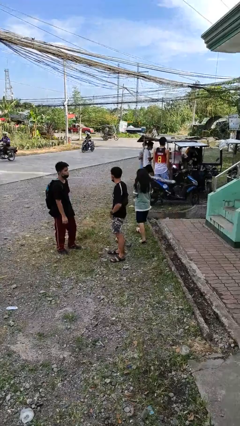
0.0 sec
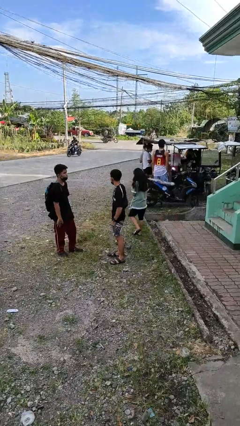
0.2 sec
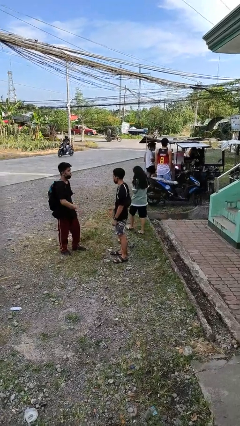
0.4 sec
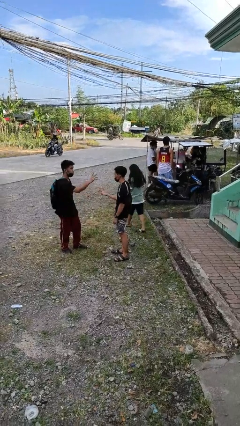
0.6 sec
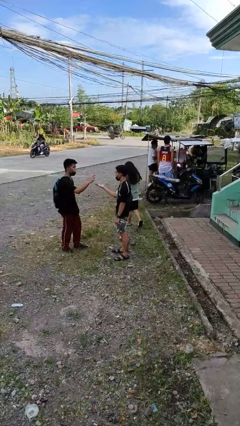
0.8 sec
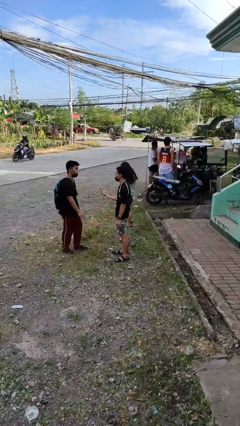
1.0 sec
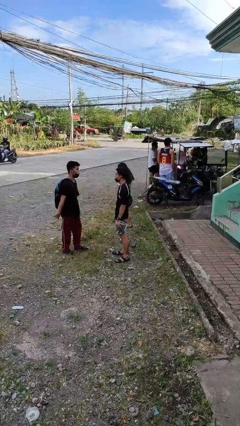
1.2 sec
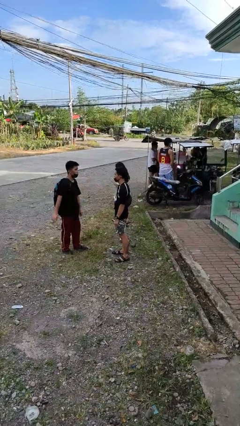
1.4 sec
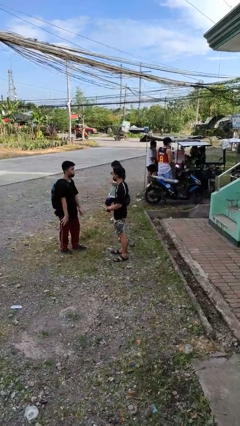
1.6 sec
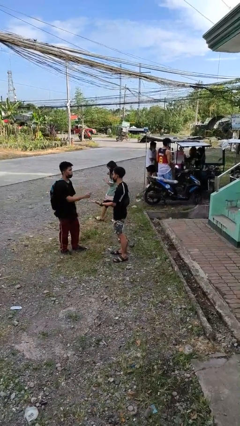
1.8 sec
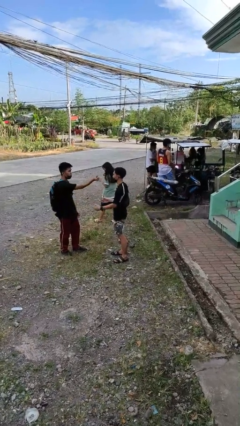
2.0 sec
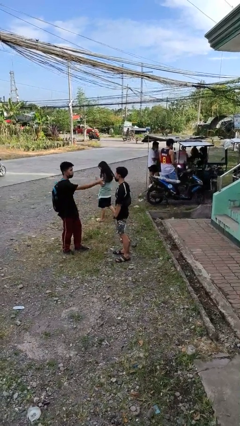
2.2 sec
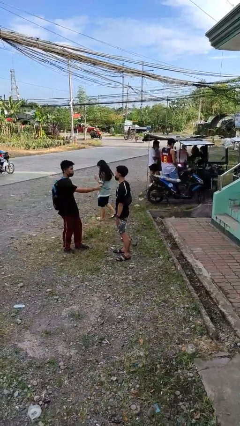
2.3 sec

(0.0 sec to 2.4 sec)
person talks to person

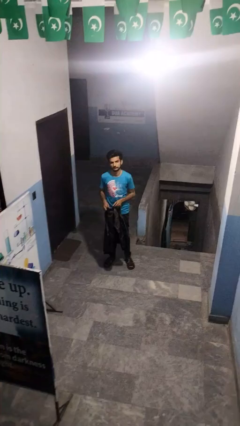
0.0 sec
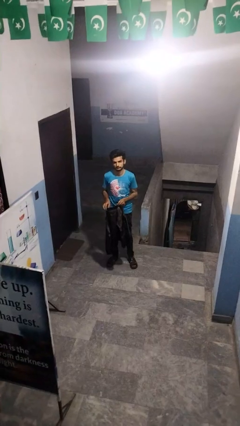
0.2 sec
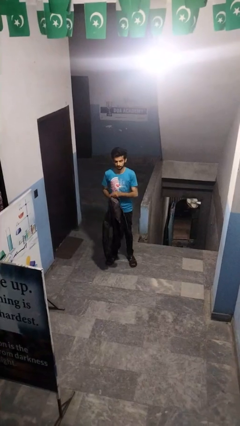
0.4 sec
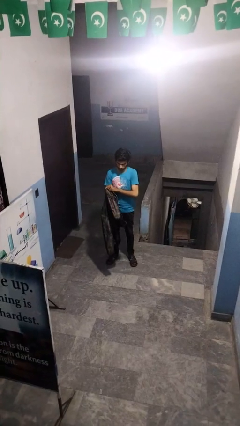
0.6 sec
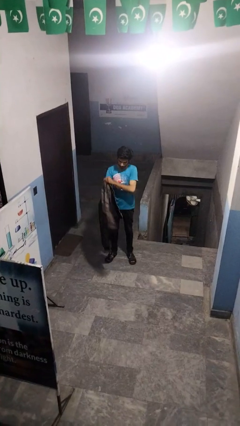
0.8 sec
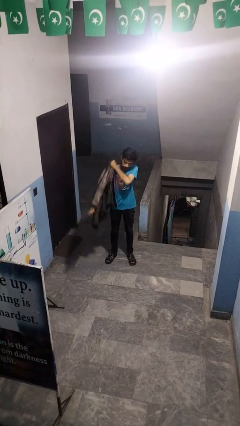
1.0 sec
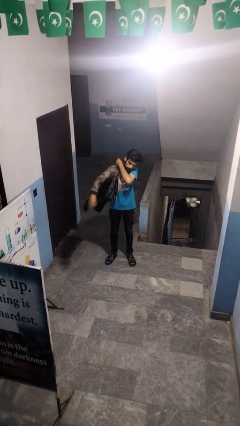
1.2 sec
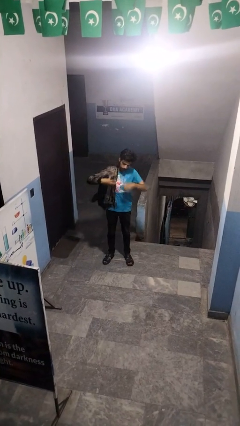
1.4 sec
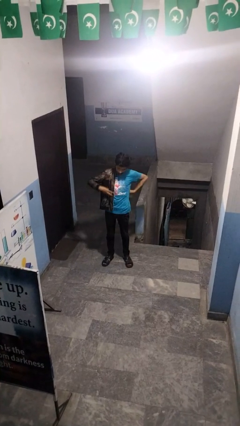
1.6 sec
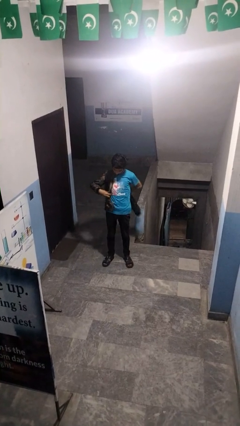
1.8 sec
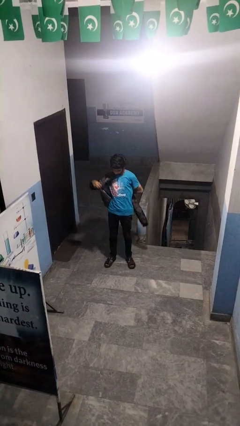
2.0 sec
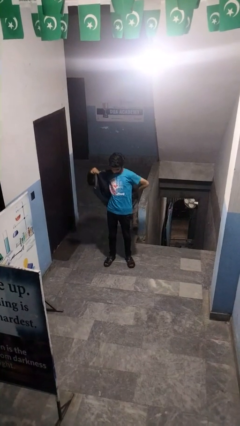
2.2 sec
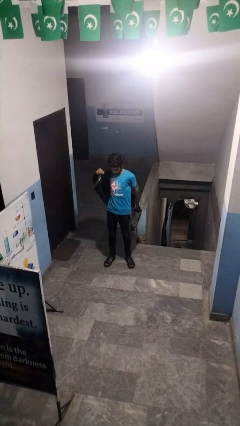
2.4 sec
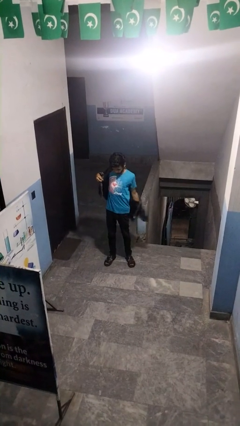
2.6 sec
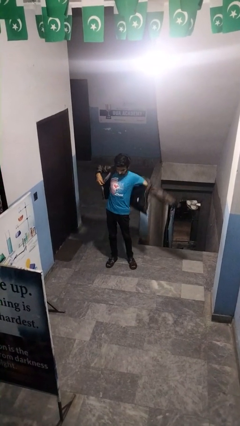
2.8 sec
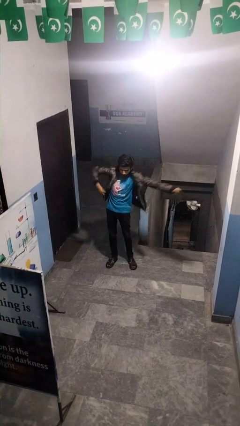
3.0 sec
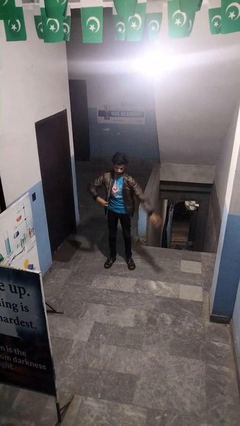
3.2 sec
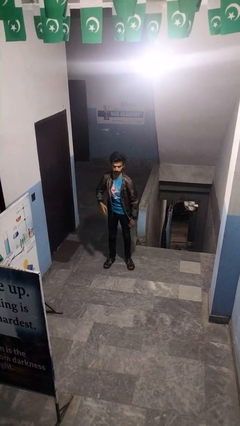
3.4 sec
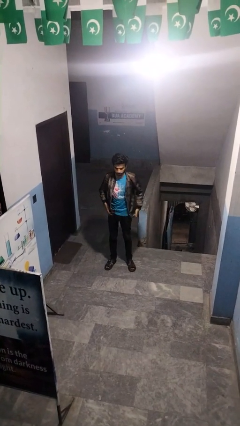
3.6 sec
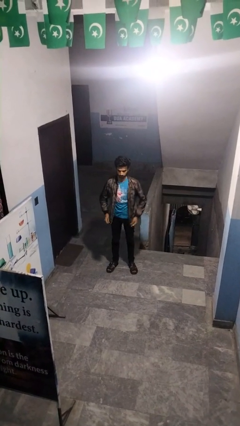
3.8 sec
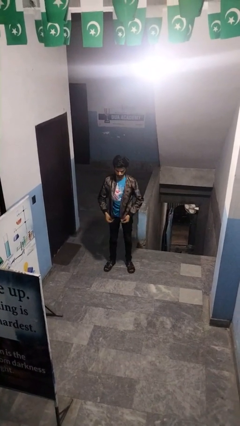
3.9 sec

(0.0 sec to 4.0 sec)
person puts on jacket

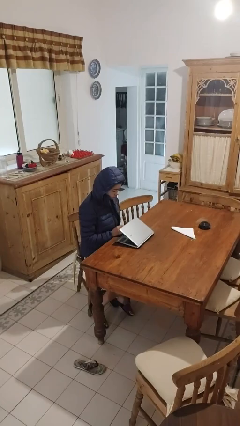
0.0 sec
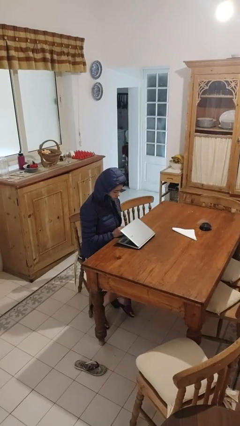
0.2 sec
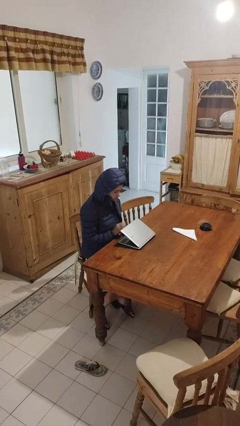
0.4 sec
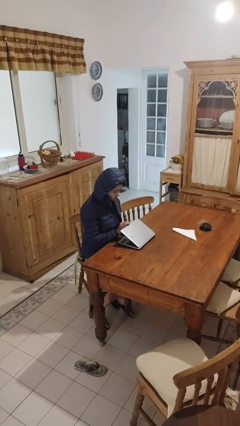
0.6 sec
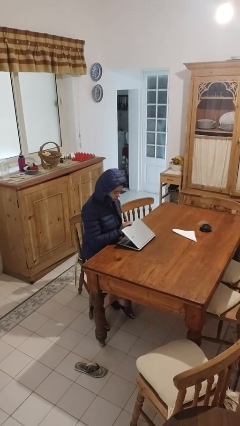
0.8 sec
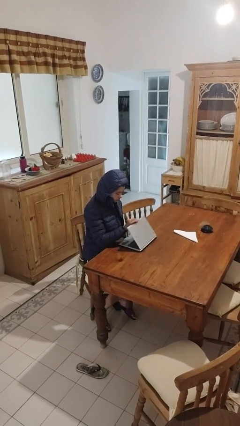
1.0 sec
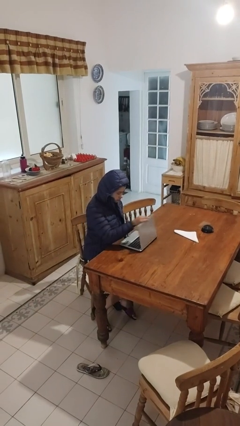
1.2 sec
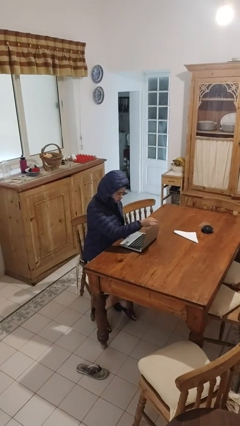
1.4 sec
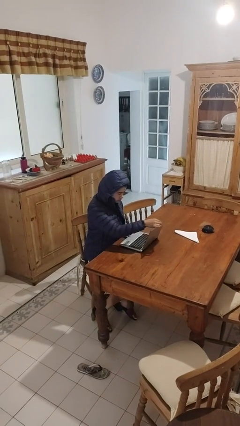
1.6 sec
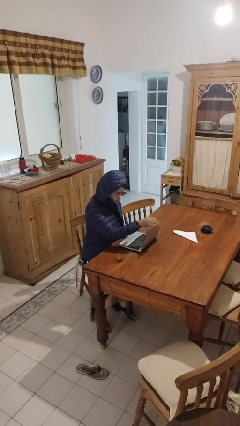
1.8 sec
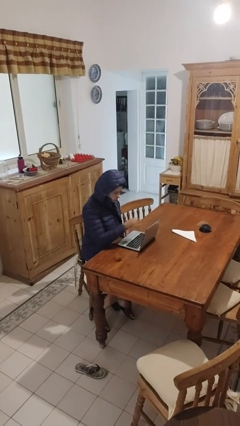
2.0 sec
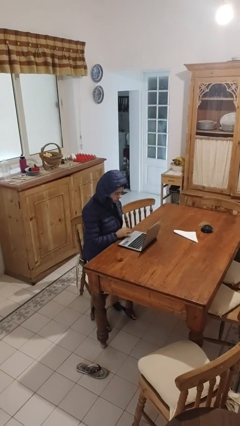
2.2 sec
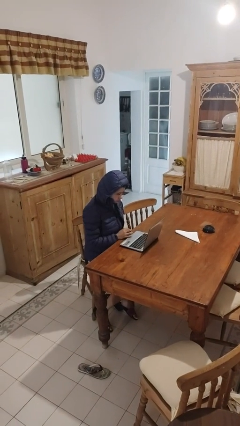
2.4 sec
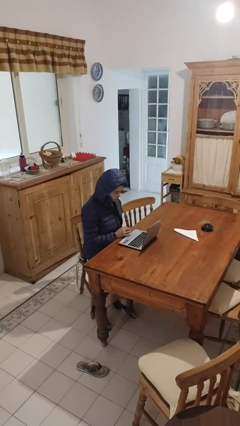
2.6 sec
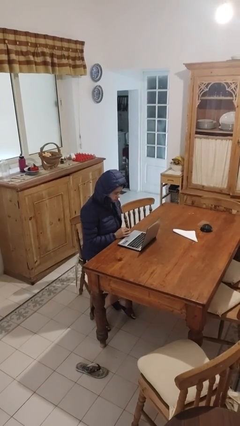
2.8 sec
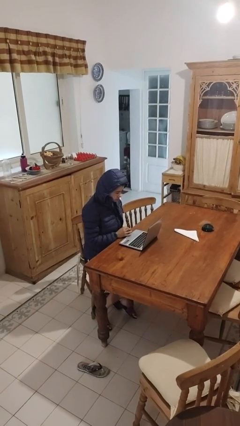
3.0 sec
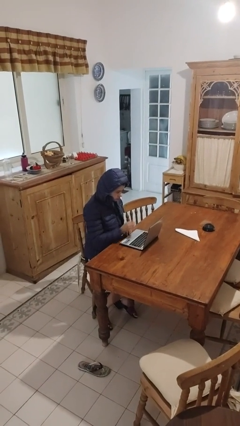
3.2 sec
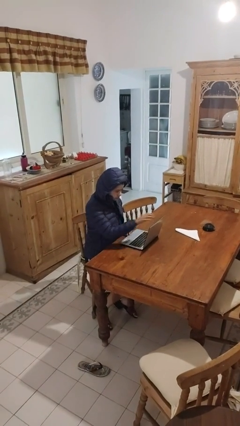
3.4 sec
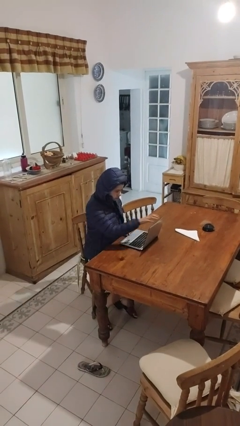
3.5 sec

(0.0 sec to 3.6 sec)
person opens laptop

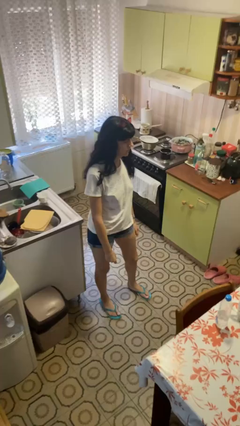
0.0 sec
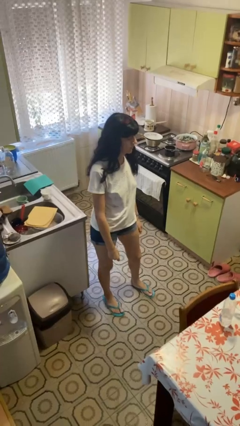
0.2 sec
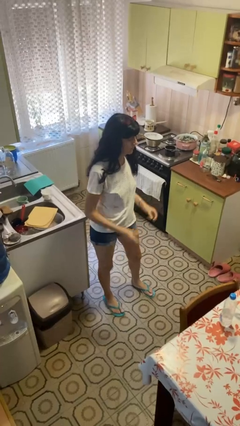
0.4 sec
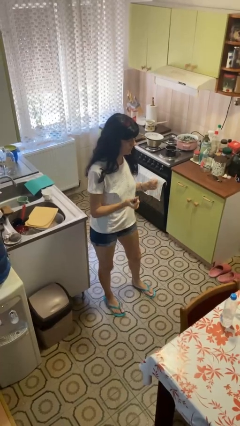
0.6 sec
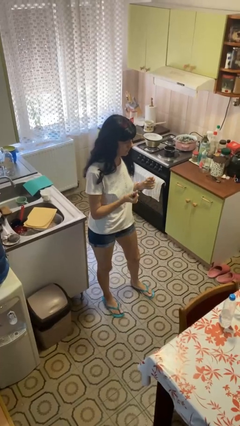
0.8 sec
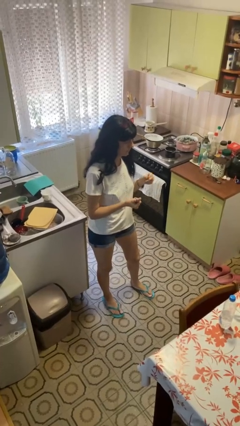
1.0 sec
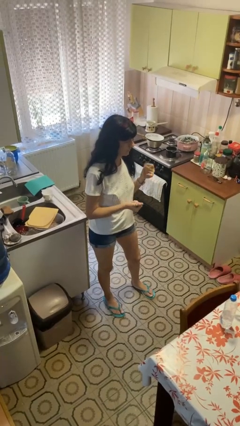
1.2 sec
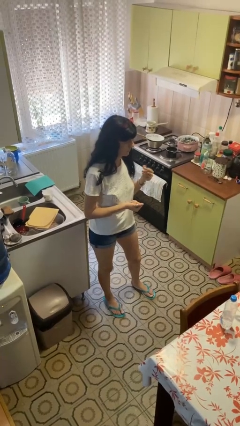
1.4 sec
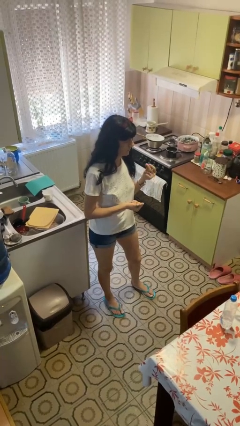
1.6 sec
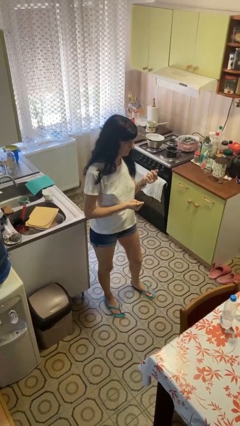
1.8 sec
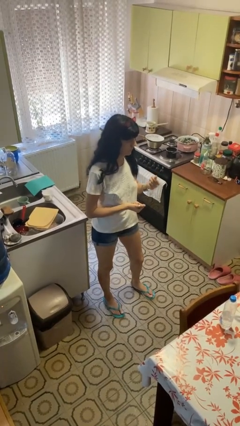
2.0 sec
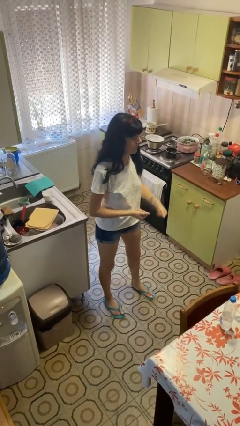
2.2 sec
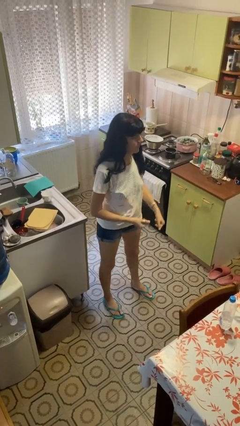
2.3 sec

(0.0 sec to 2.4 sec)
person snaps fingers

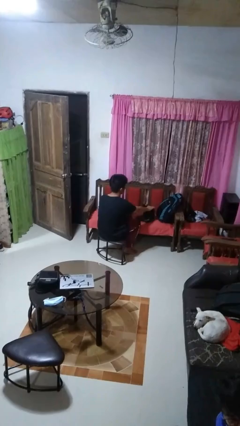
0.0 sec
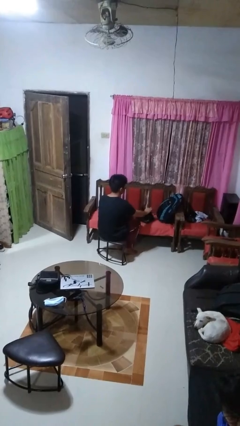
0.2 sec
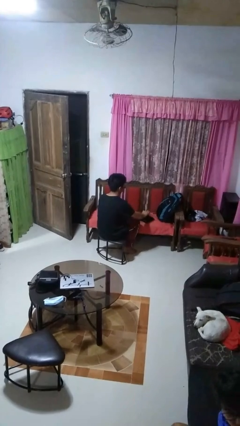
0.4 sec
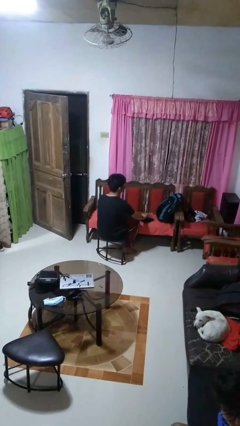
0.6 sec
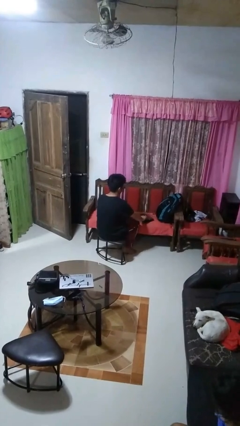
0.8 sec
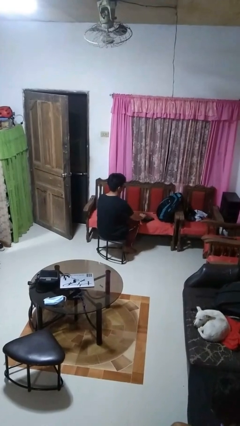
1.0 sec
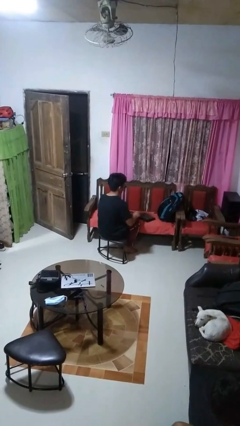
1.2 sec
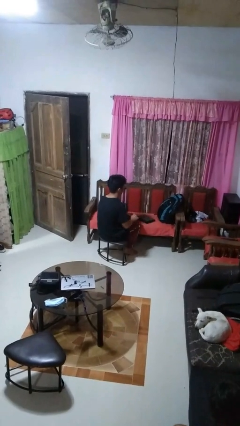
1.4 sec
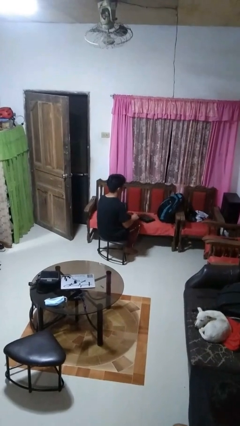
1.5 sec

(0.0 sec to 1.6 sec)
person closes laptop

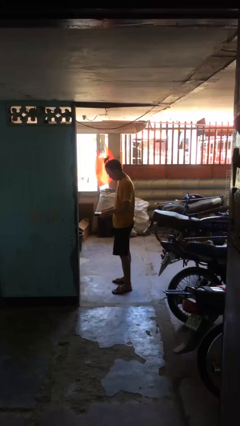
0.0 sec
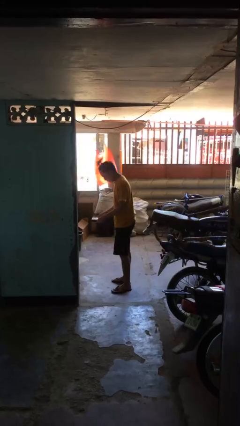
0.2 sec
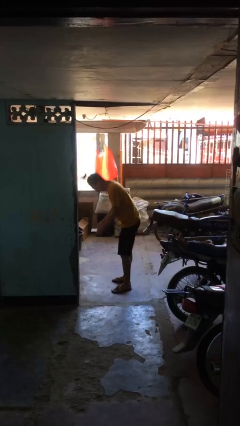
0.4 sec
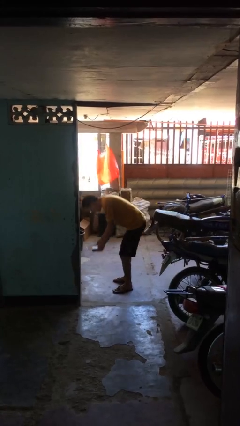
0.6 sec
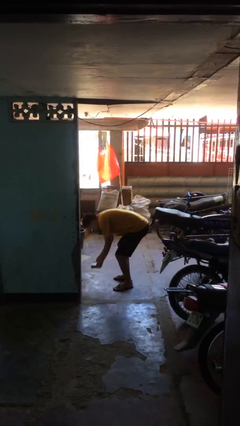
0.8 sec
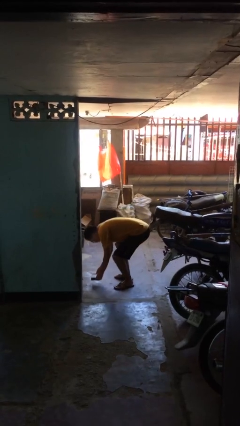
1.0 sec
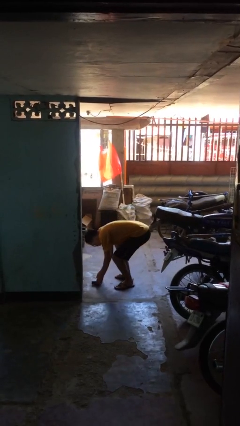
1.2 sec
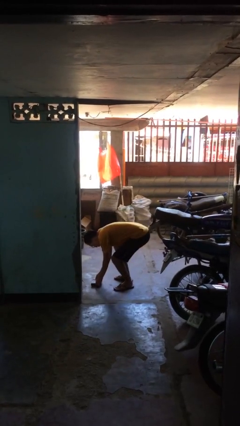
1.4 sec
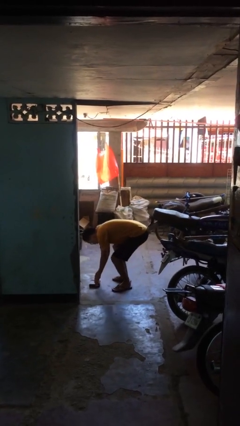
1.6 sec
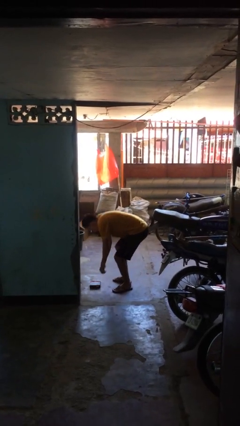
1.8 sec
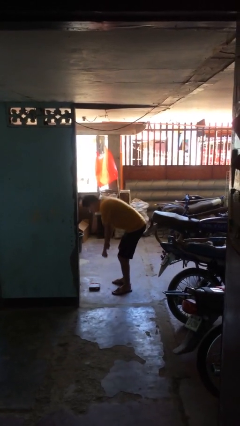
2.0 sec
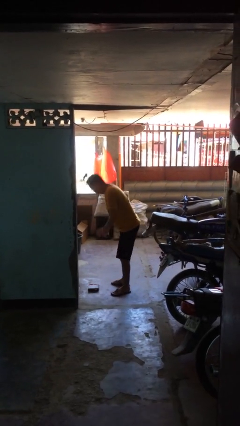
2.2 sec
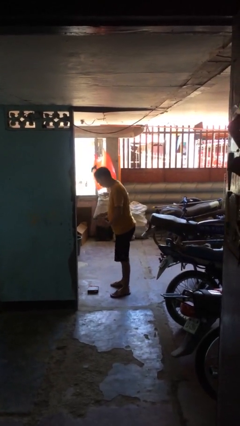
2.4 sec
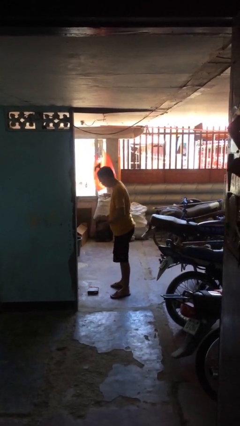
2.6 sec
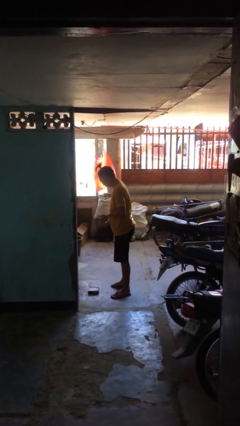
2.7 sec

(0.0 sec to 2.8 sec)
person puts down object on floor

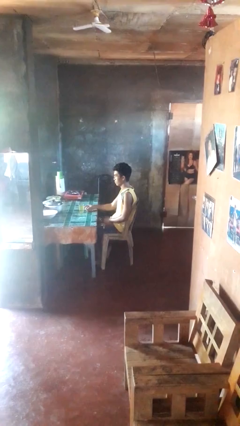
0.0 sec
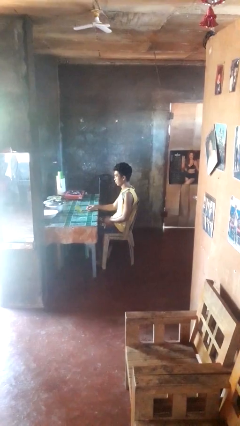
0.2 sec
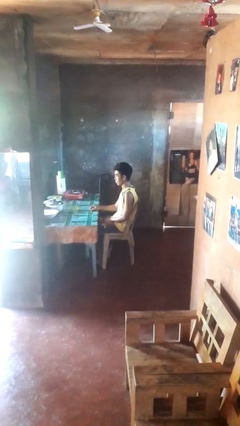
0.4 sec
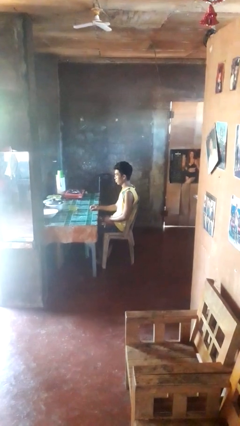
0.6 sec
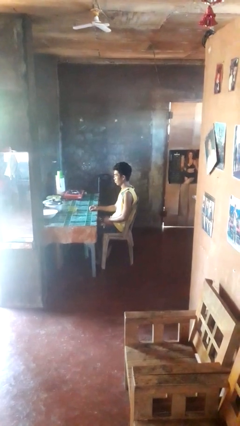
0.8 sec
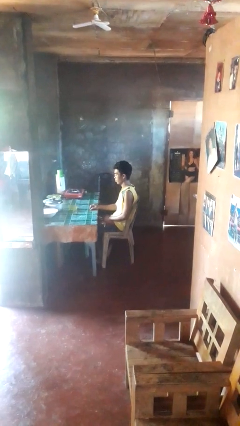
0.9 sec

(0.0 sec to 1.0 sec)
person knocks over glass
